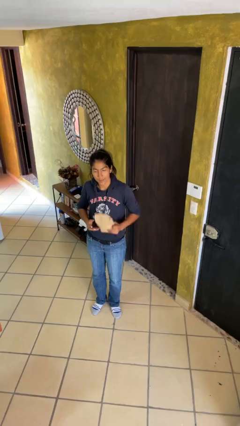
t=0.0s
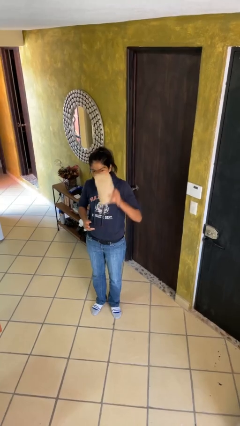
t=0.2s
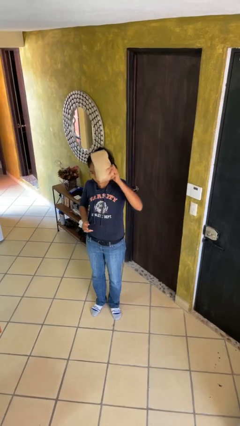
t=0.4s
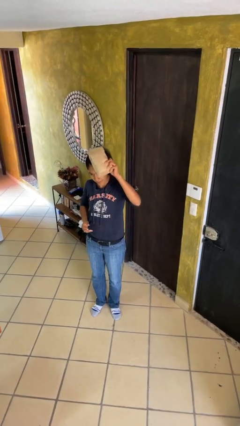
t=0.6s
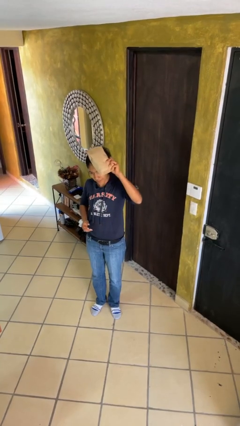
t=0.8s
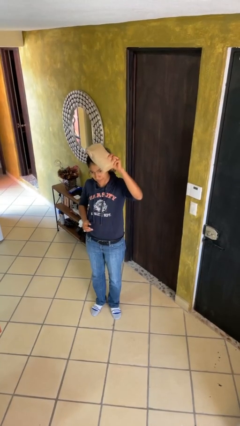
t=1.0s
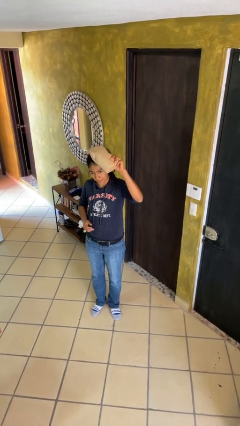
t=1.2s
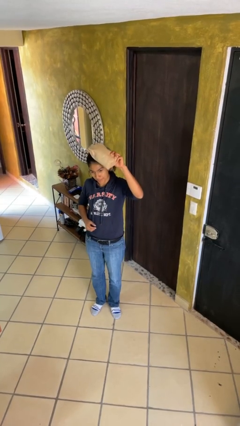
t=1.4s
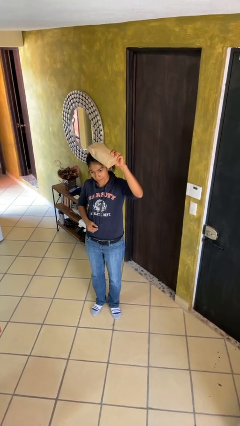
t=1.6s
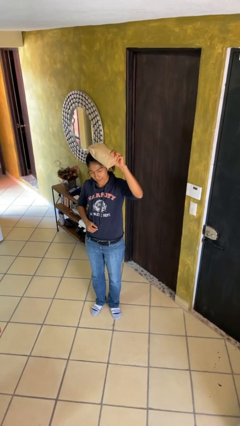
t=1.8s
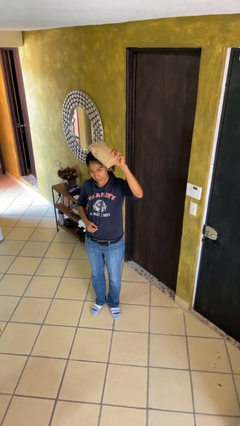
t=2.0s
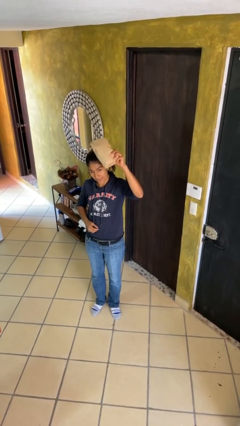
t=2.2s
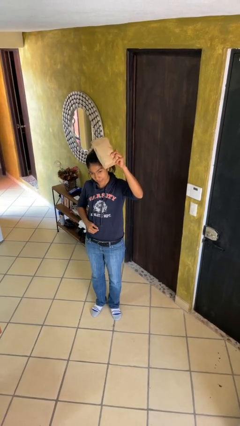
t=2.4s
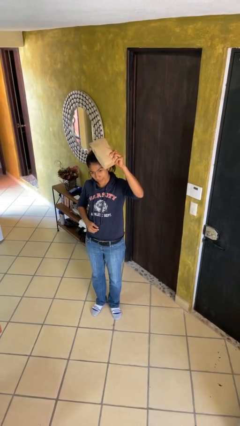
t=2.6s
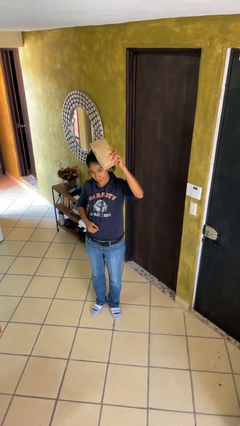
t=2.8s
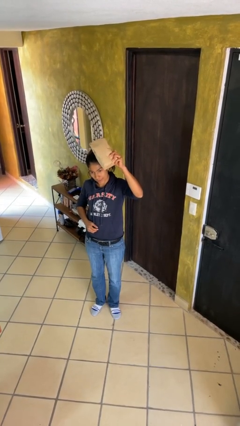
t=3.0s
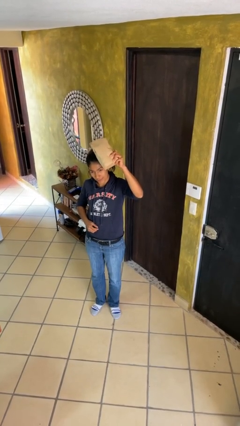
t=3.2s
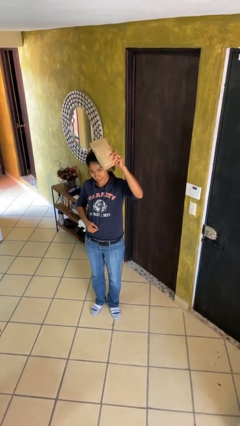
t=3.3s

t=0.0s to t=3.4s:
person holds object above head

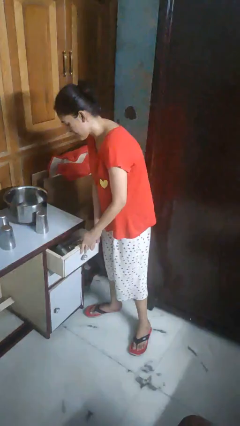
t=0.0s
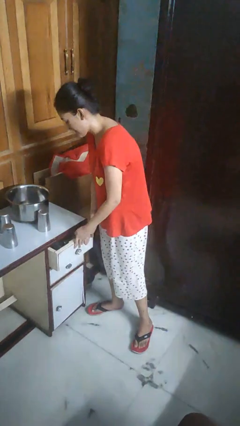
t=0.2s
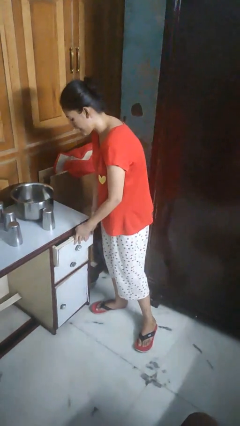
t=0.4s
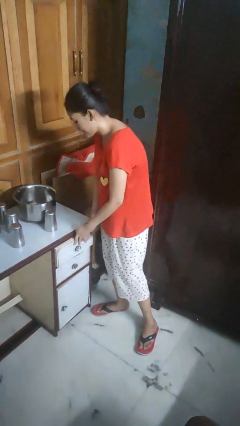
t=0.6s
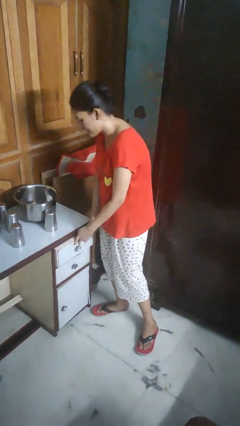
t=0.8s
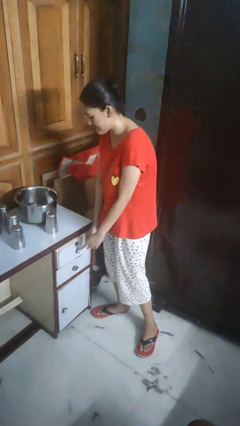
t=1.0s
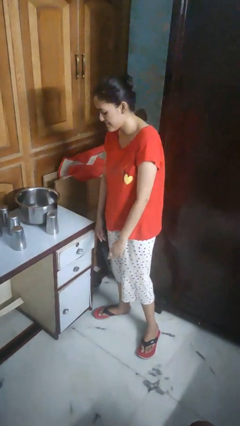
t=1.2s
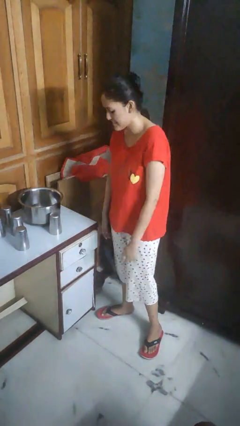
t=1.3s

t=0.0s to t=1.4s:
person closes kitchen drawer

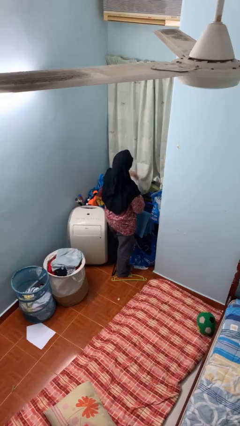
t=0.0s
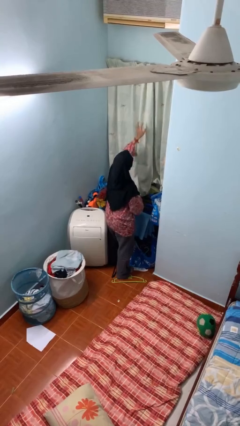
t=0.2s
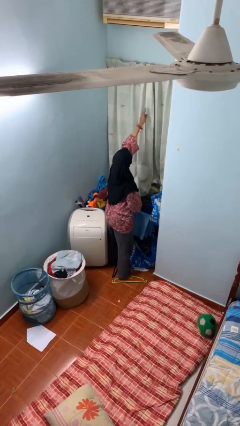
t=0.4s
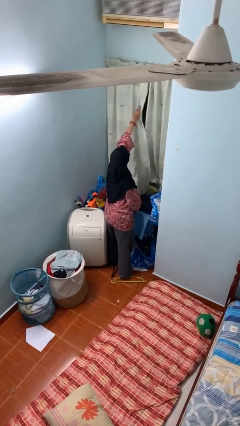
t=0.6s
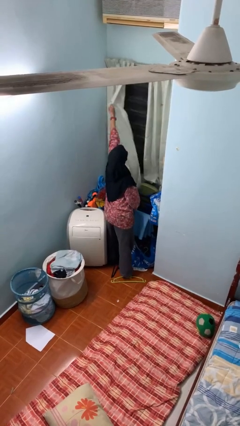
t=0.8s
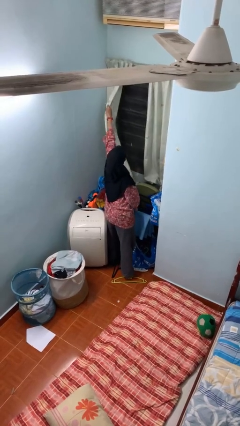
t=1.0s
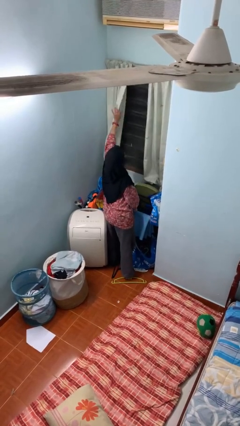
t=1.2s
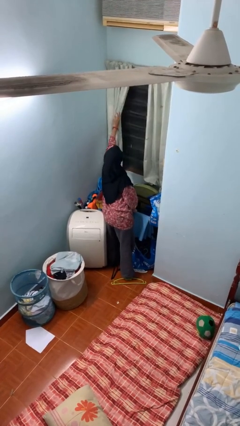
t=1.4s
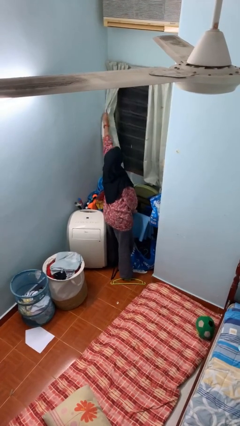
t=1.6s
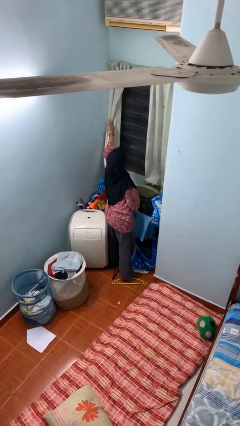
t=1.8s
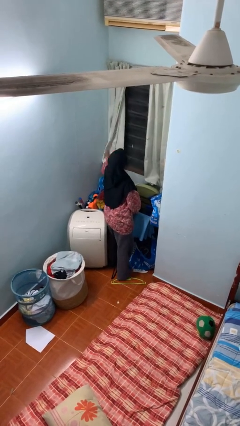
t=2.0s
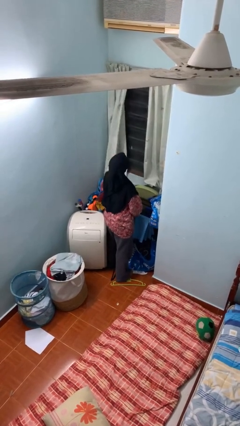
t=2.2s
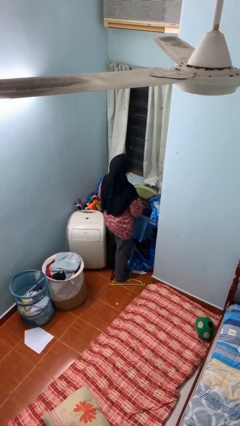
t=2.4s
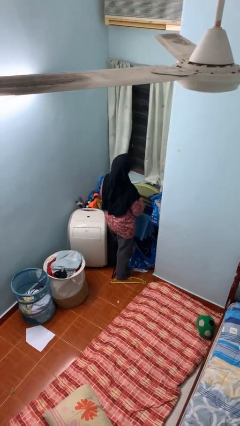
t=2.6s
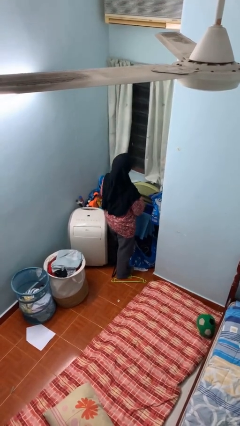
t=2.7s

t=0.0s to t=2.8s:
person opens curtains

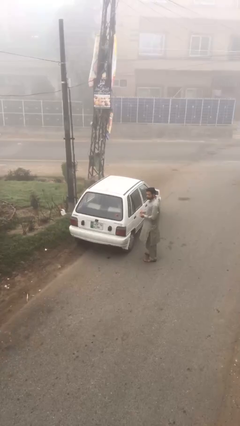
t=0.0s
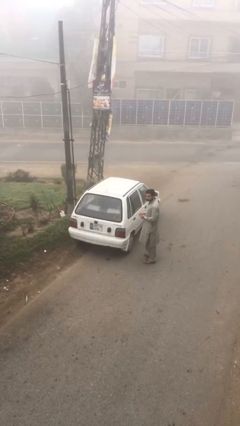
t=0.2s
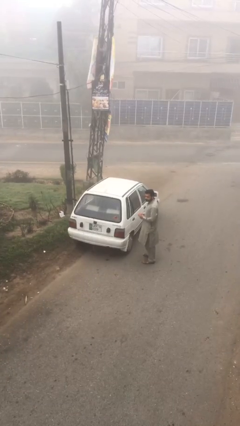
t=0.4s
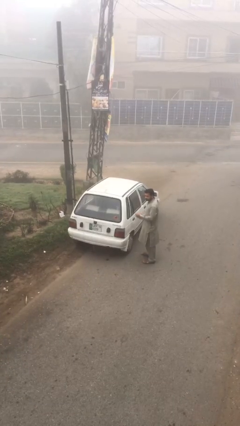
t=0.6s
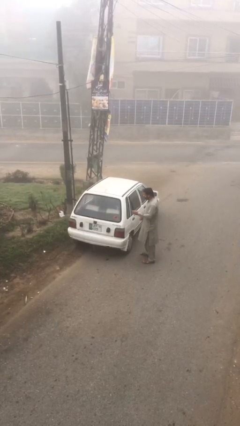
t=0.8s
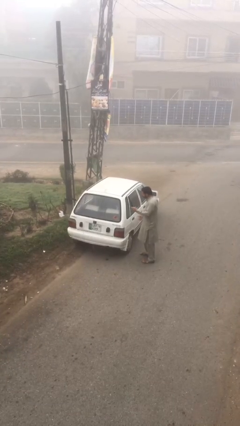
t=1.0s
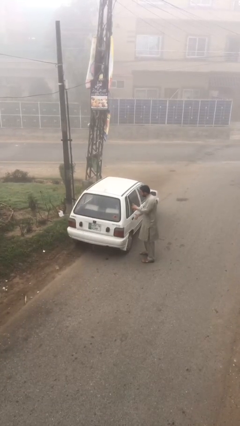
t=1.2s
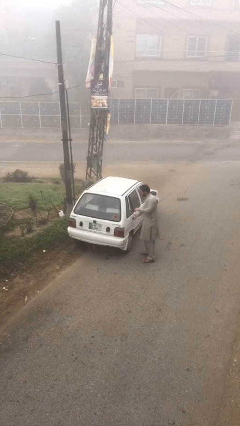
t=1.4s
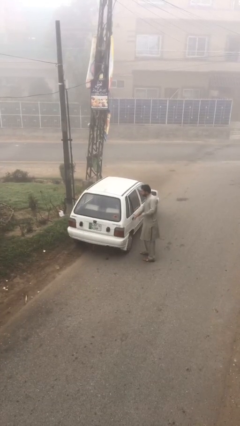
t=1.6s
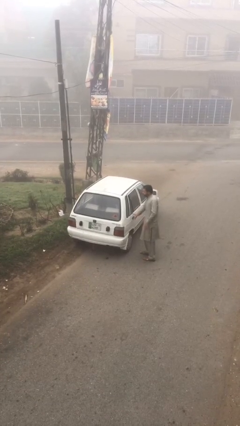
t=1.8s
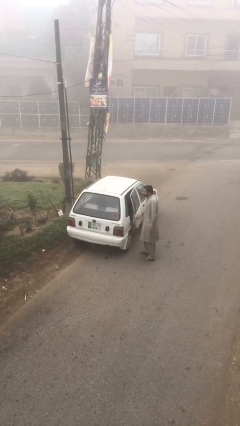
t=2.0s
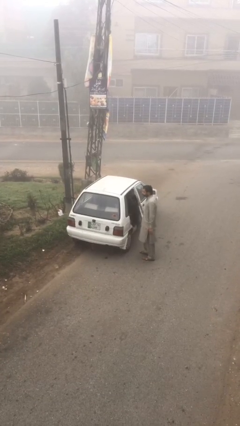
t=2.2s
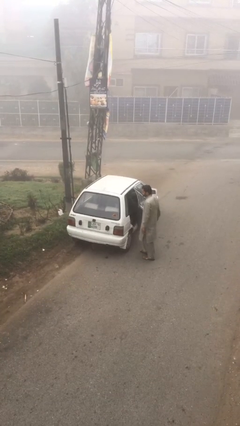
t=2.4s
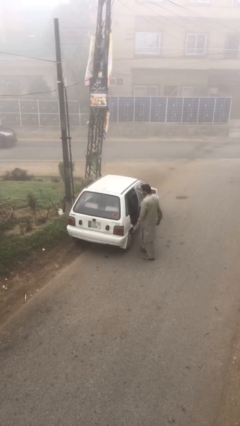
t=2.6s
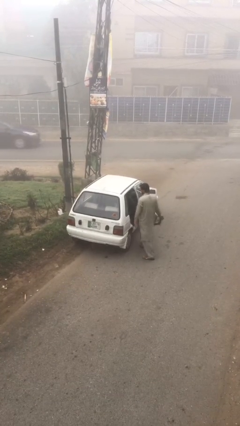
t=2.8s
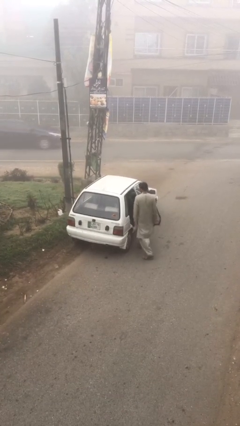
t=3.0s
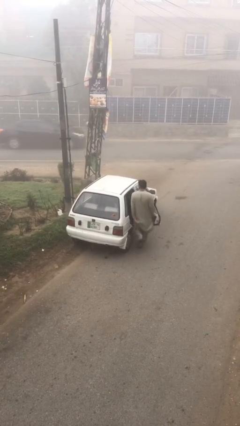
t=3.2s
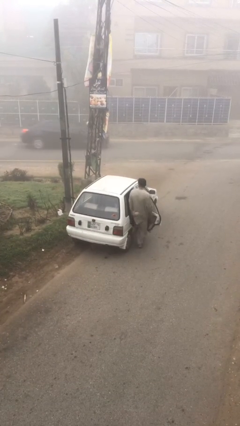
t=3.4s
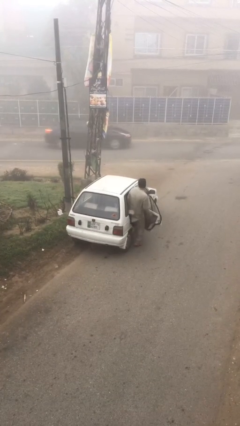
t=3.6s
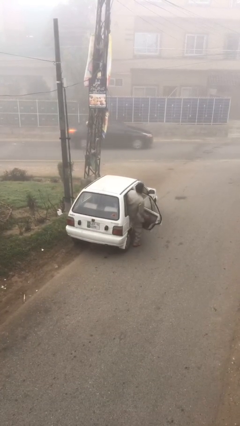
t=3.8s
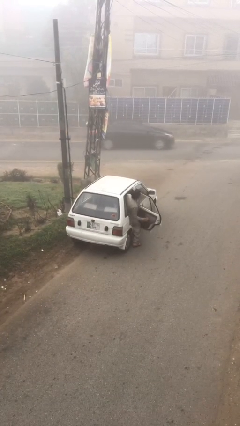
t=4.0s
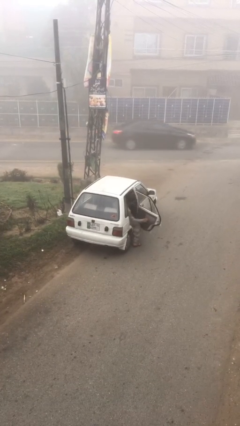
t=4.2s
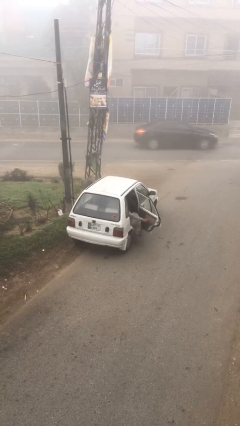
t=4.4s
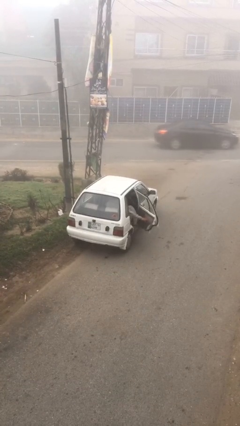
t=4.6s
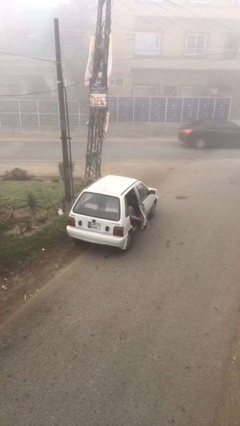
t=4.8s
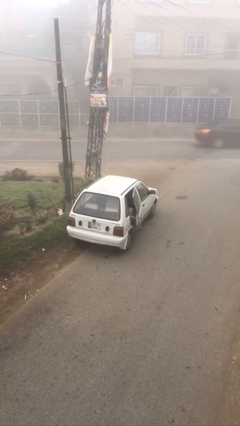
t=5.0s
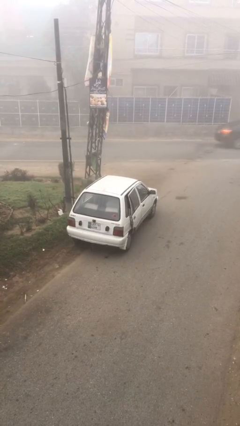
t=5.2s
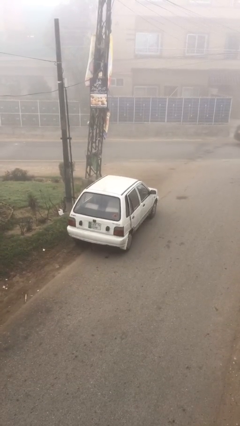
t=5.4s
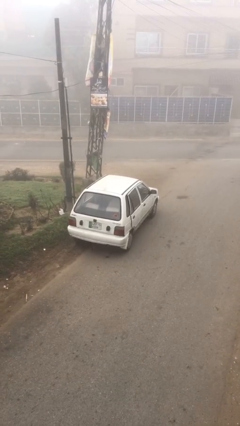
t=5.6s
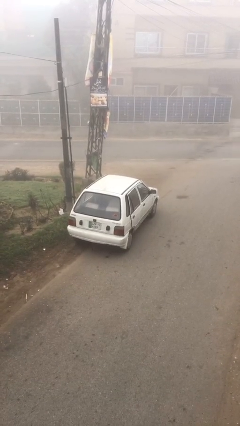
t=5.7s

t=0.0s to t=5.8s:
car picks up person

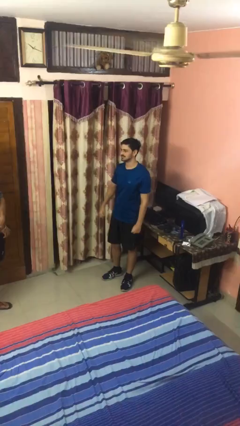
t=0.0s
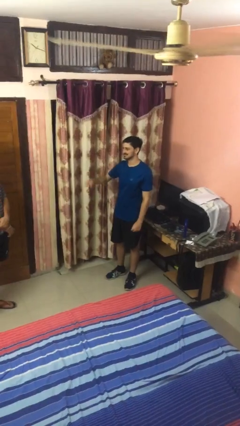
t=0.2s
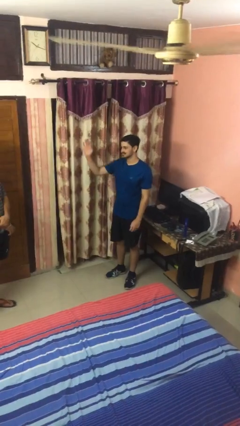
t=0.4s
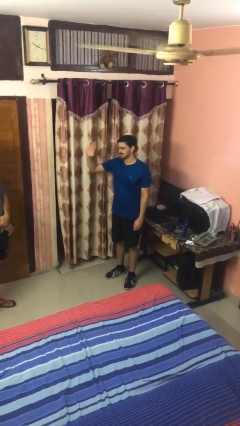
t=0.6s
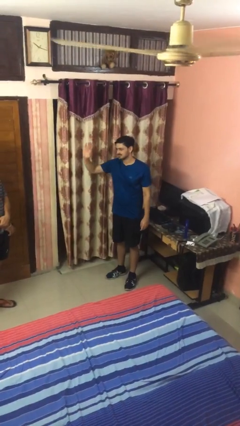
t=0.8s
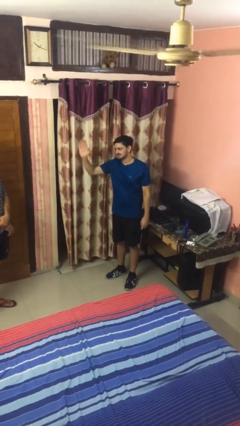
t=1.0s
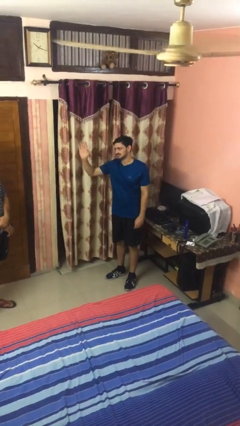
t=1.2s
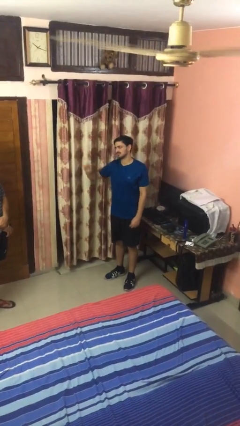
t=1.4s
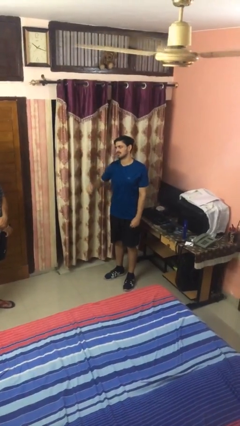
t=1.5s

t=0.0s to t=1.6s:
person waves at person

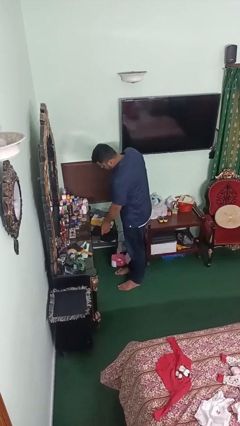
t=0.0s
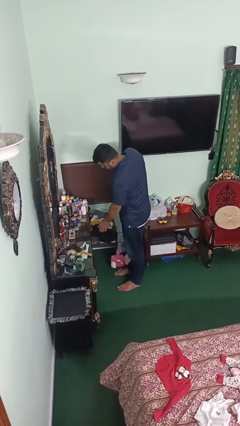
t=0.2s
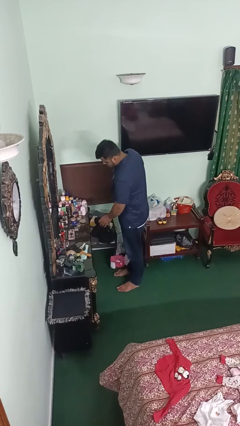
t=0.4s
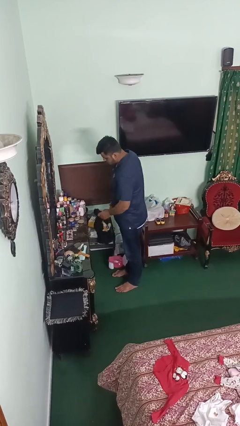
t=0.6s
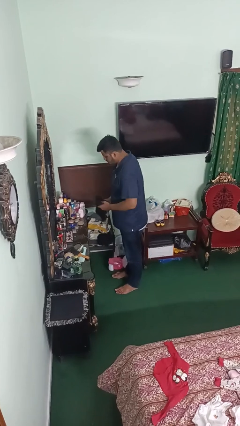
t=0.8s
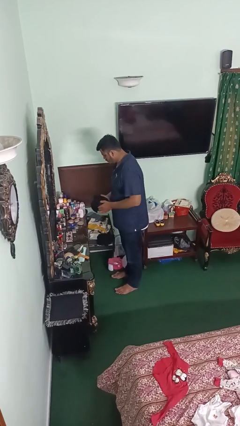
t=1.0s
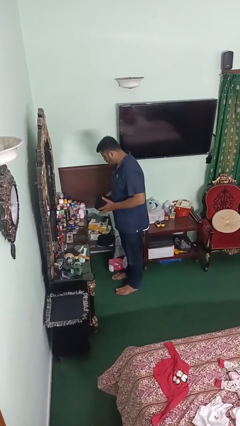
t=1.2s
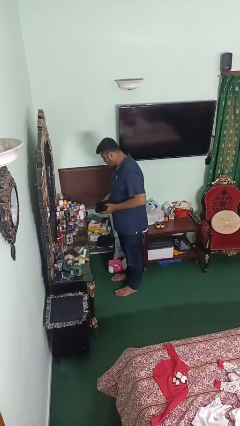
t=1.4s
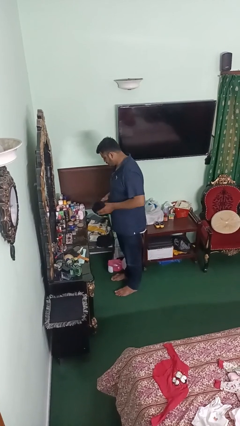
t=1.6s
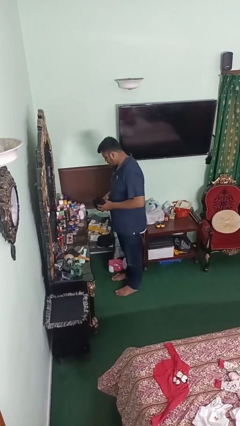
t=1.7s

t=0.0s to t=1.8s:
person takes clothes from dresser

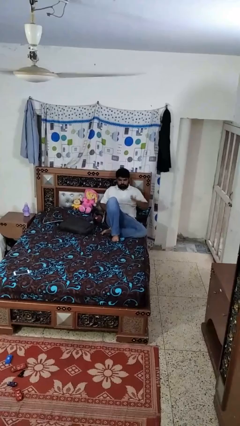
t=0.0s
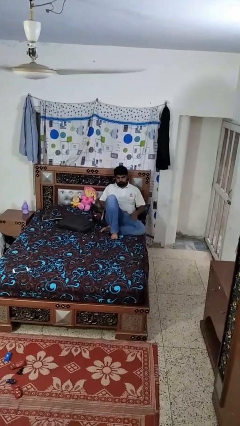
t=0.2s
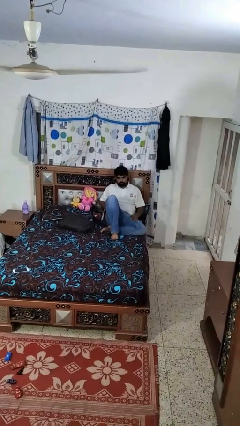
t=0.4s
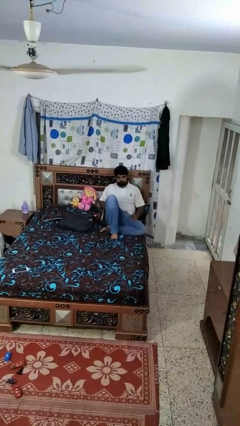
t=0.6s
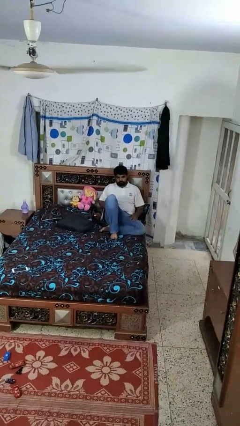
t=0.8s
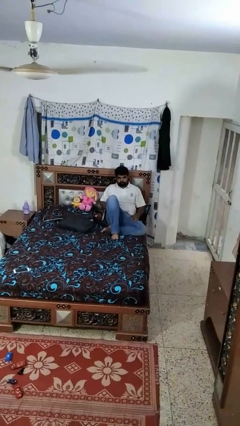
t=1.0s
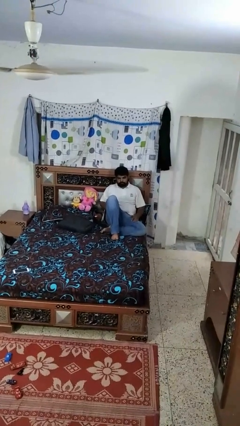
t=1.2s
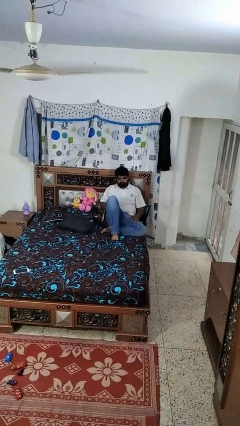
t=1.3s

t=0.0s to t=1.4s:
person gestures lower hand
